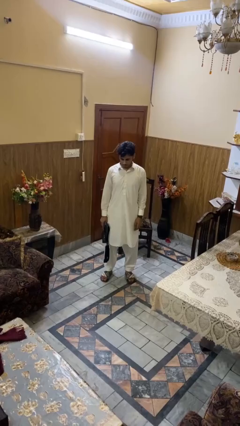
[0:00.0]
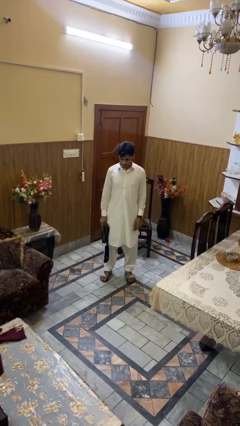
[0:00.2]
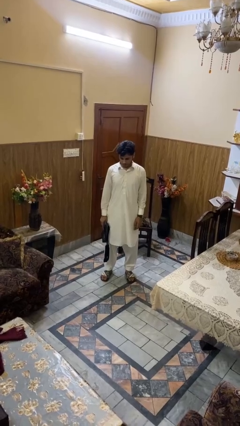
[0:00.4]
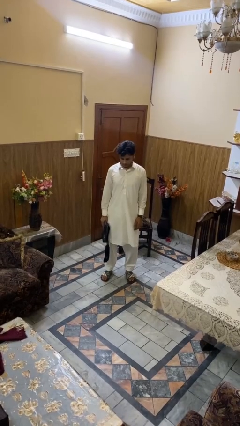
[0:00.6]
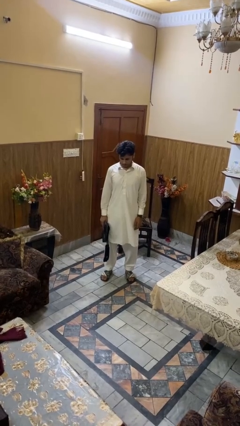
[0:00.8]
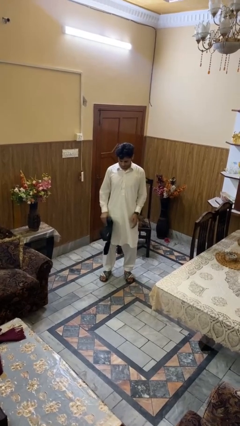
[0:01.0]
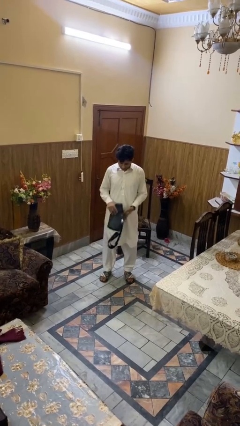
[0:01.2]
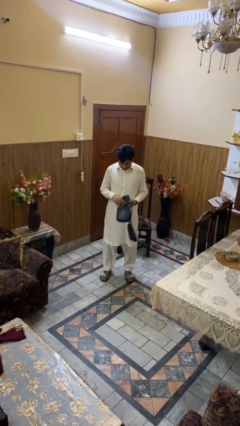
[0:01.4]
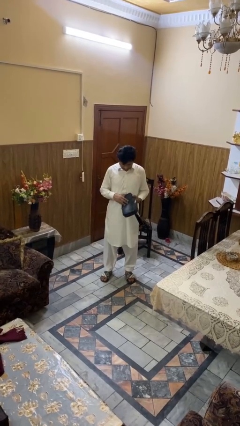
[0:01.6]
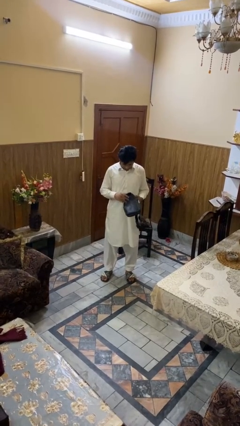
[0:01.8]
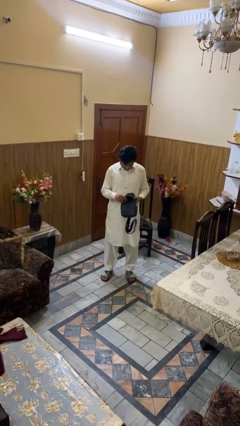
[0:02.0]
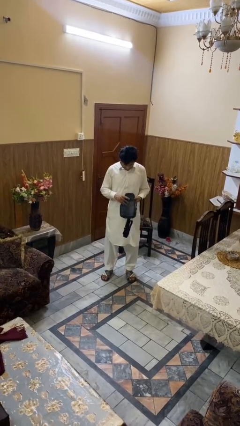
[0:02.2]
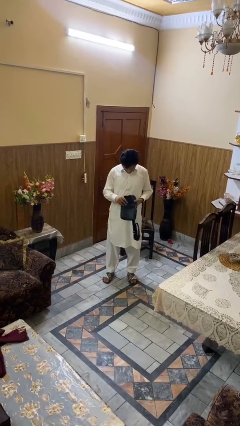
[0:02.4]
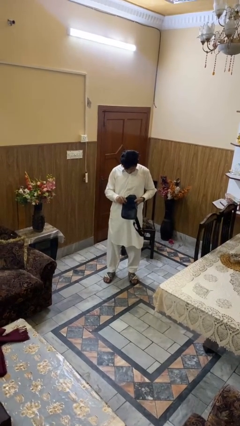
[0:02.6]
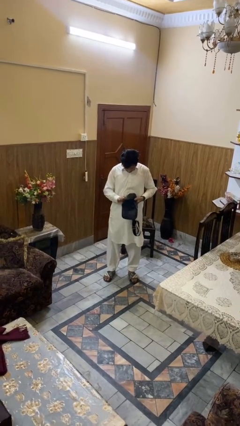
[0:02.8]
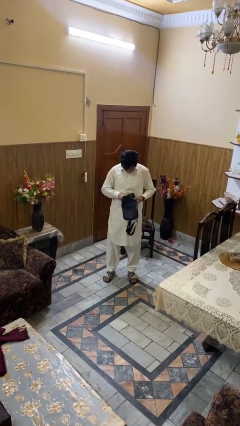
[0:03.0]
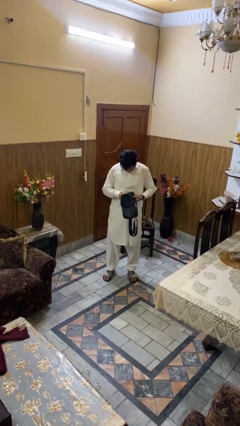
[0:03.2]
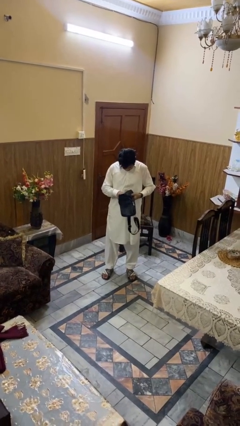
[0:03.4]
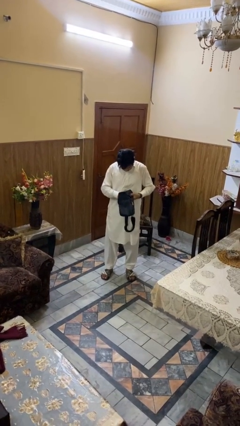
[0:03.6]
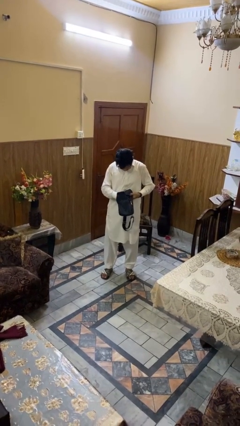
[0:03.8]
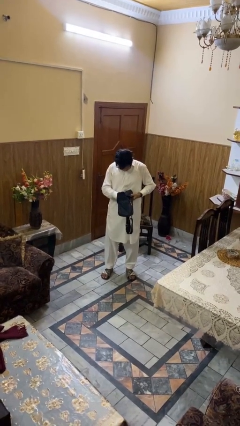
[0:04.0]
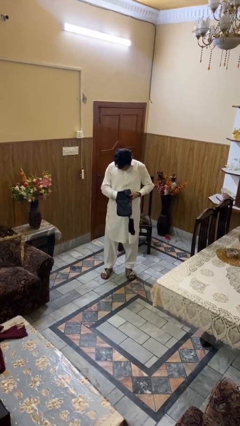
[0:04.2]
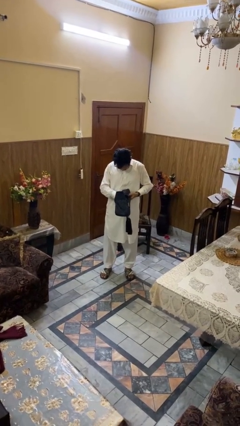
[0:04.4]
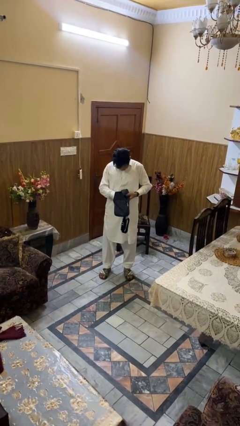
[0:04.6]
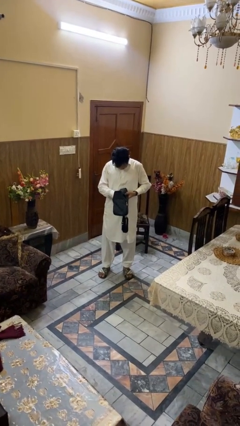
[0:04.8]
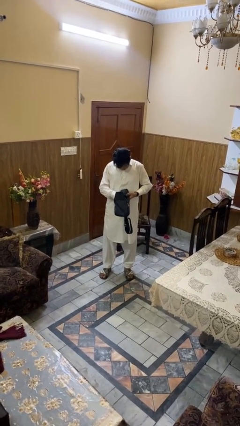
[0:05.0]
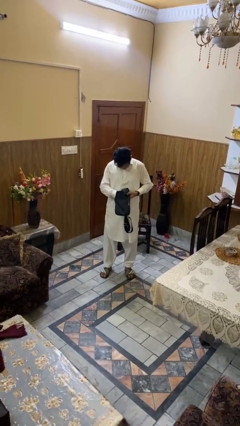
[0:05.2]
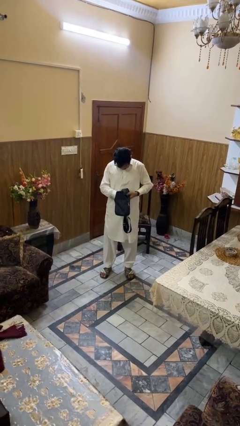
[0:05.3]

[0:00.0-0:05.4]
person searches in purse

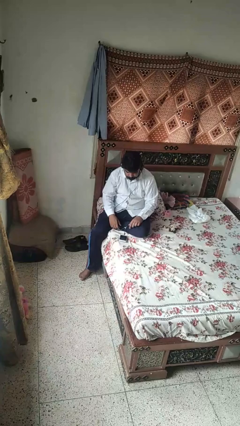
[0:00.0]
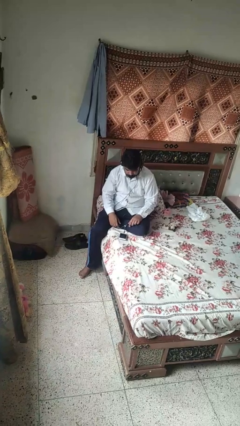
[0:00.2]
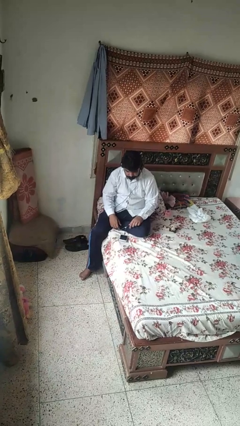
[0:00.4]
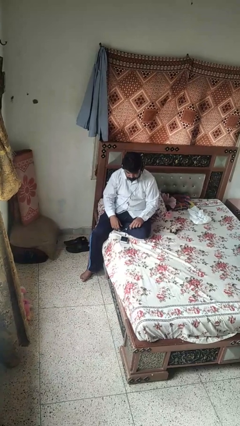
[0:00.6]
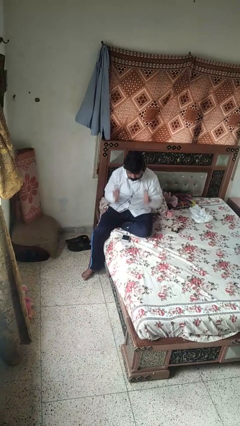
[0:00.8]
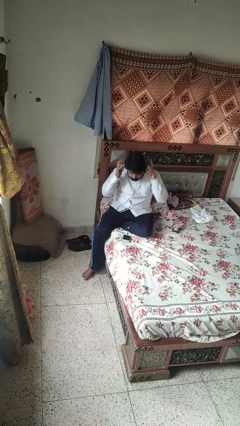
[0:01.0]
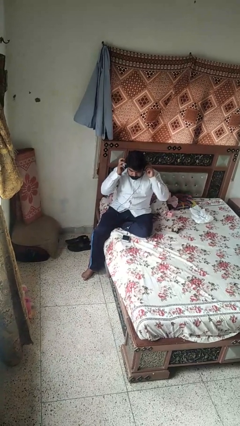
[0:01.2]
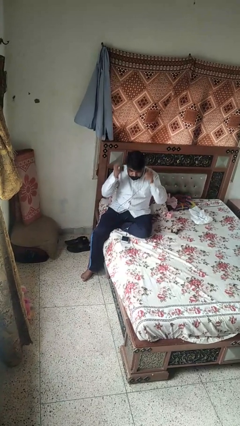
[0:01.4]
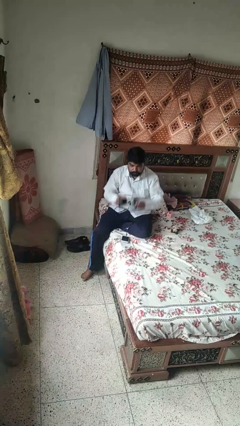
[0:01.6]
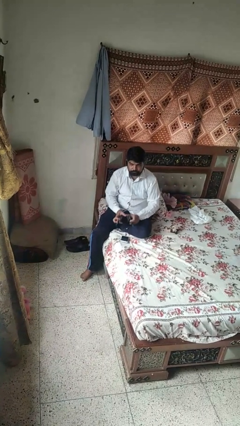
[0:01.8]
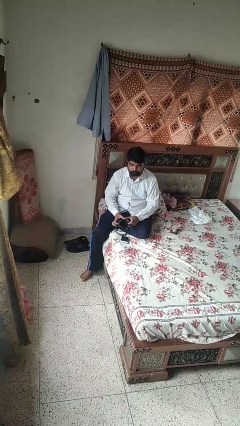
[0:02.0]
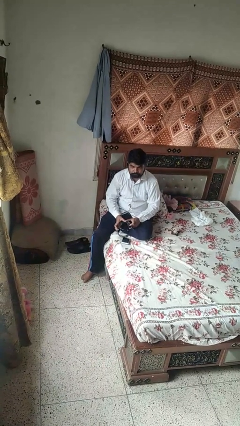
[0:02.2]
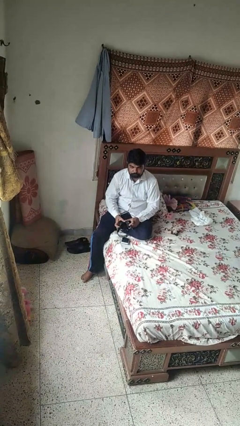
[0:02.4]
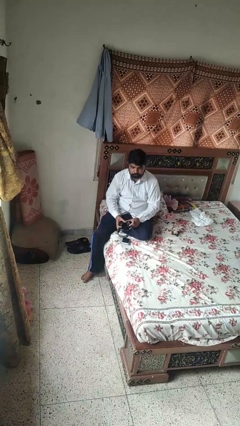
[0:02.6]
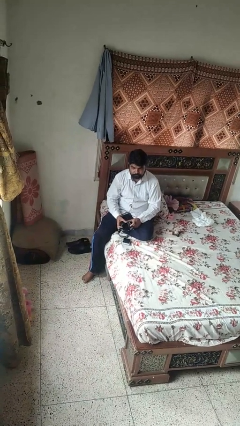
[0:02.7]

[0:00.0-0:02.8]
person takes off headphones

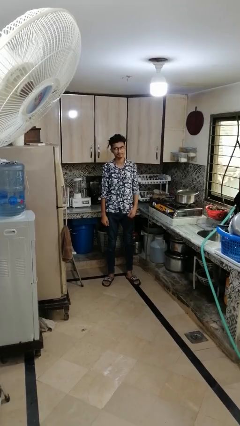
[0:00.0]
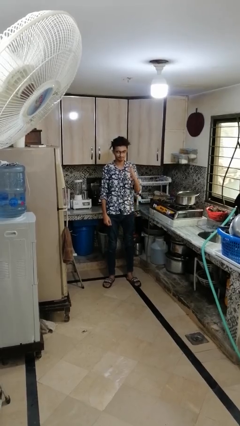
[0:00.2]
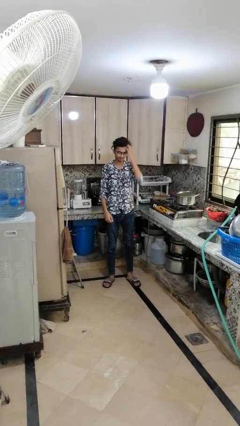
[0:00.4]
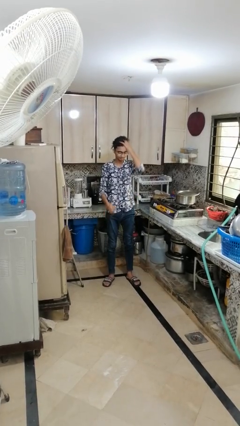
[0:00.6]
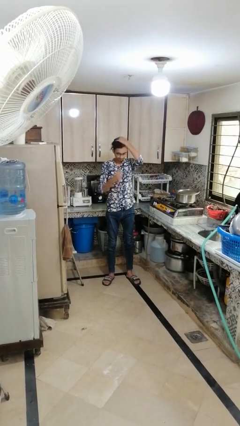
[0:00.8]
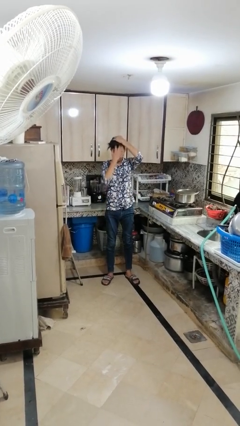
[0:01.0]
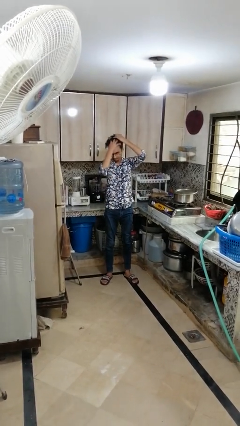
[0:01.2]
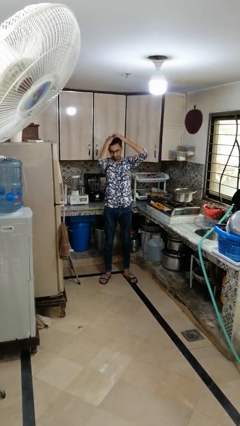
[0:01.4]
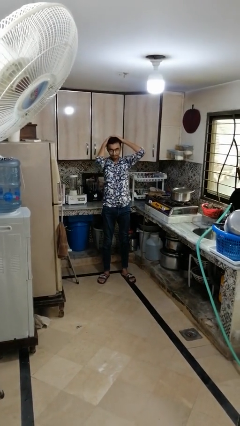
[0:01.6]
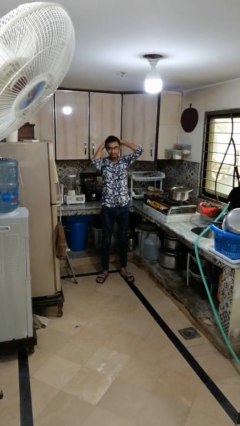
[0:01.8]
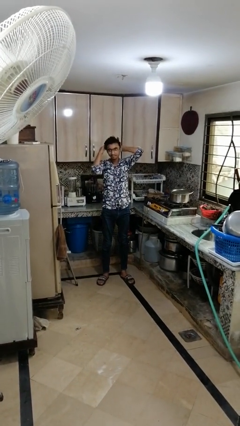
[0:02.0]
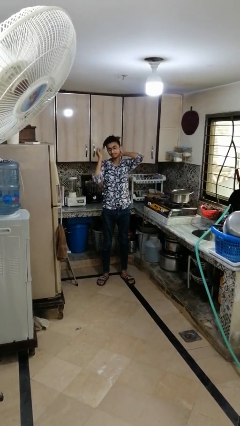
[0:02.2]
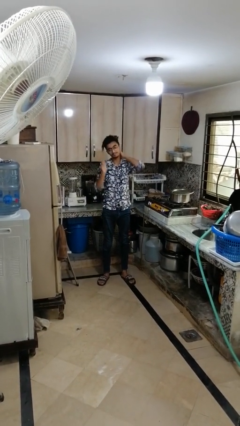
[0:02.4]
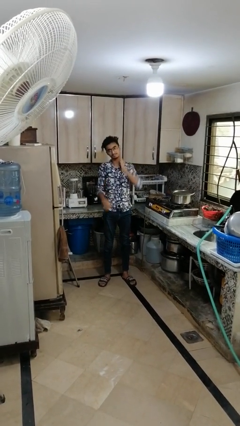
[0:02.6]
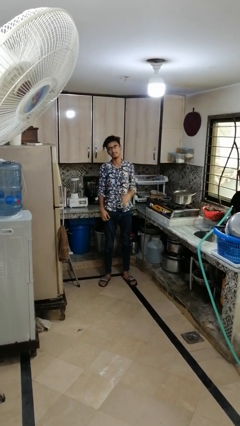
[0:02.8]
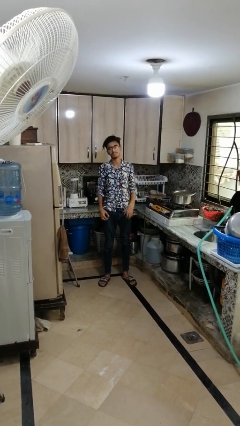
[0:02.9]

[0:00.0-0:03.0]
person strokes hair

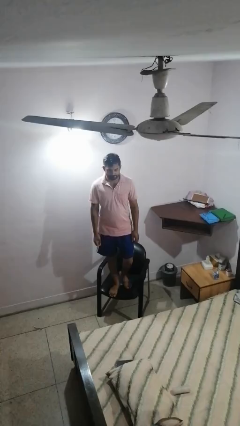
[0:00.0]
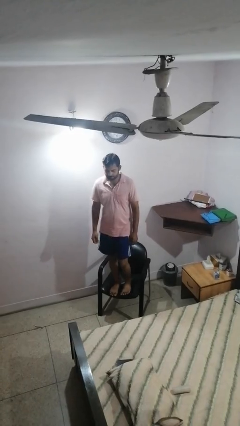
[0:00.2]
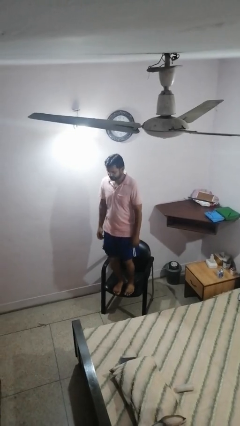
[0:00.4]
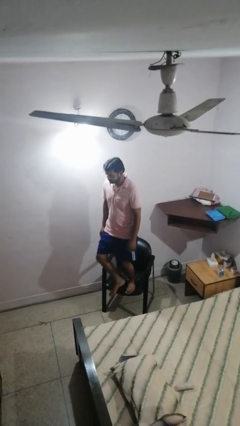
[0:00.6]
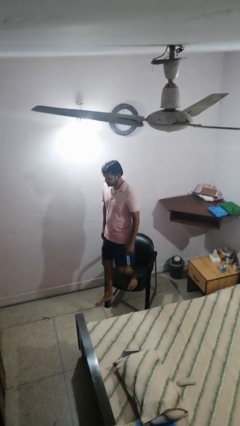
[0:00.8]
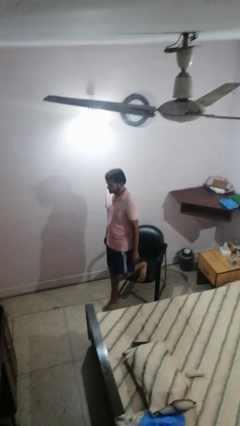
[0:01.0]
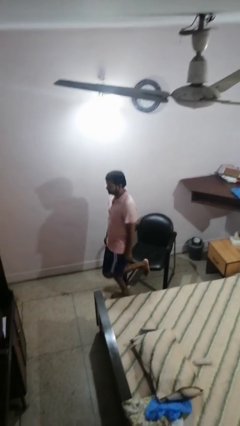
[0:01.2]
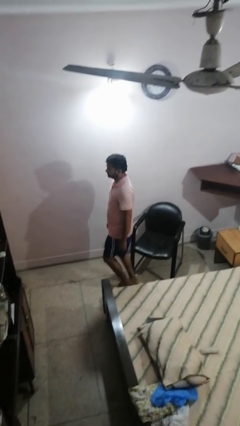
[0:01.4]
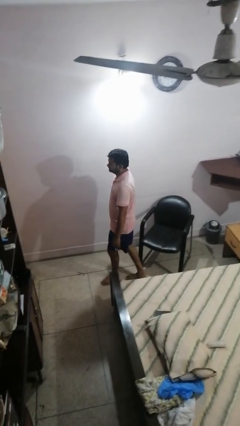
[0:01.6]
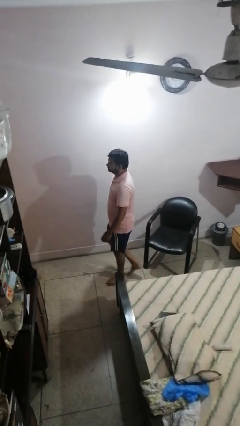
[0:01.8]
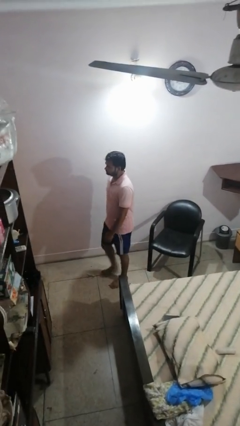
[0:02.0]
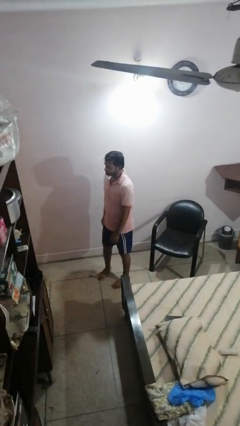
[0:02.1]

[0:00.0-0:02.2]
person climbs off chair

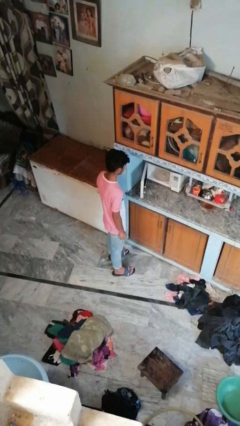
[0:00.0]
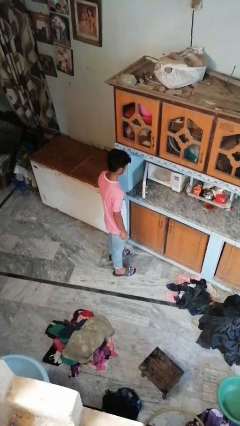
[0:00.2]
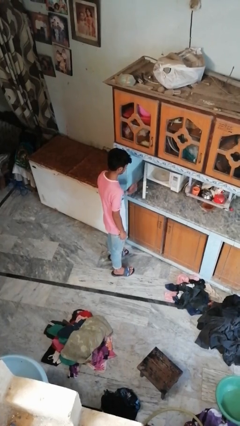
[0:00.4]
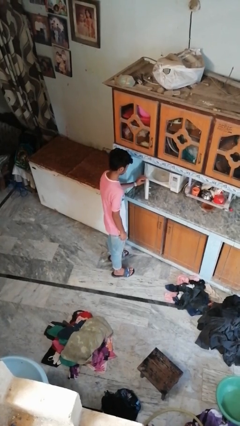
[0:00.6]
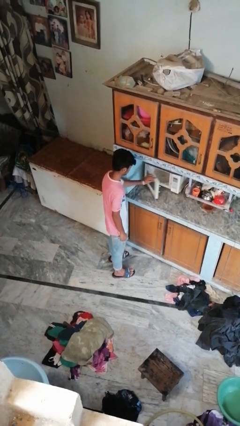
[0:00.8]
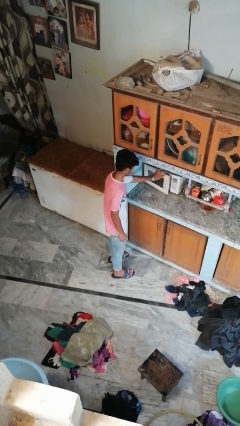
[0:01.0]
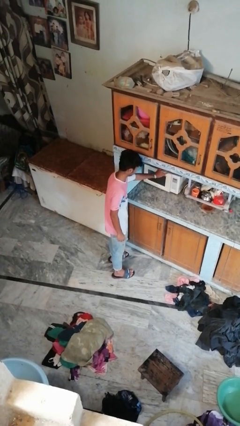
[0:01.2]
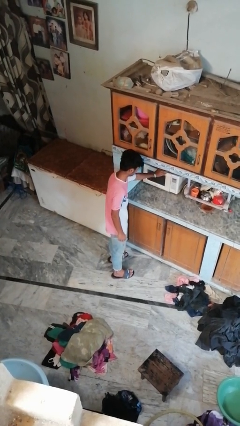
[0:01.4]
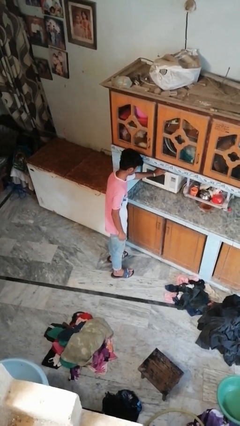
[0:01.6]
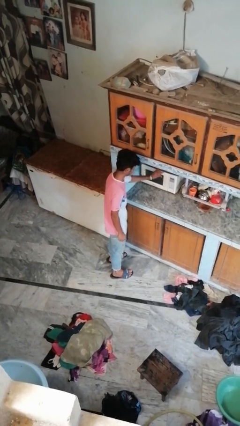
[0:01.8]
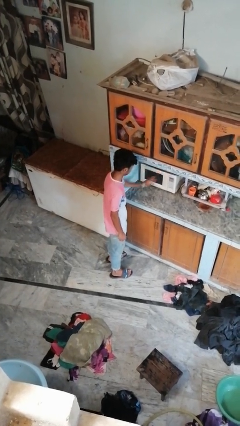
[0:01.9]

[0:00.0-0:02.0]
person closes oven door

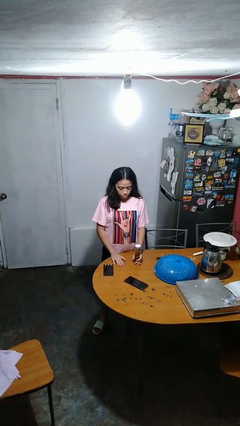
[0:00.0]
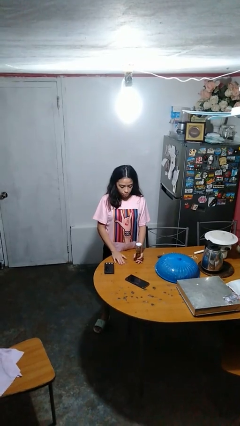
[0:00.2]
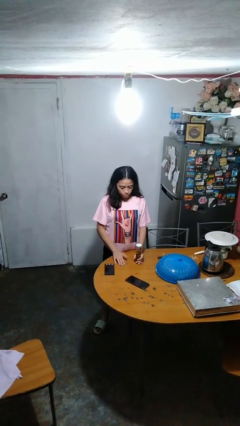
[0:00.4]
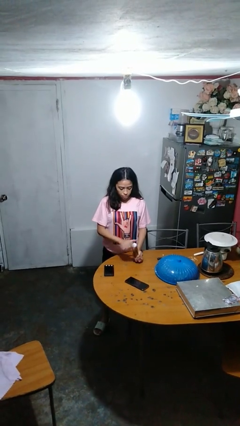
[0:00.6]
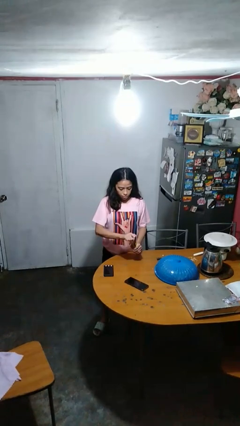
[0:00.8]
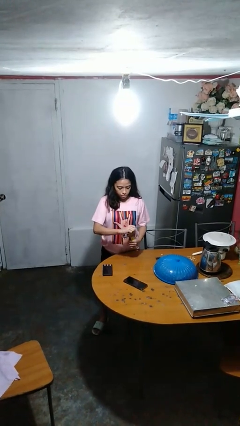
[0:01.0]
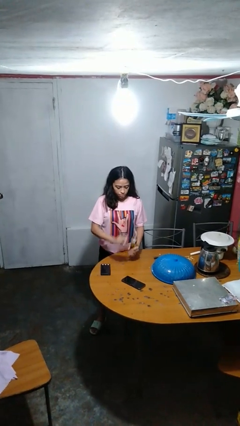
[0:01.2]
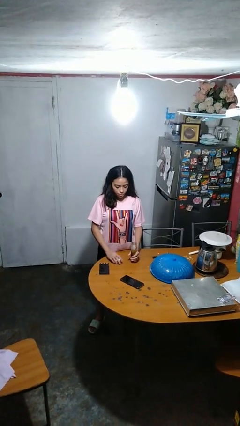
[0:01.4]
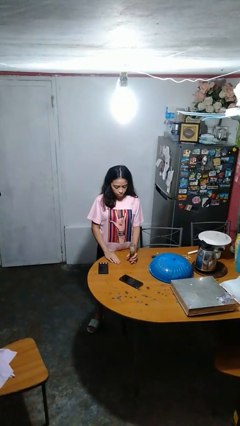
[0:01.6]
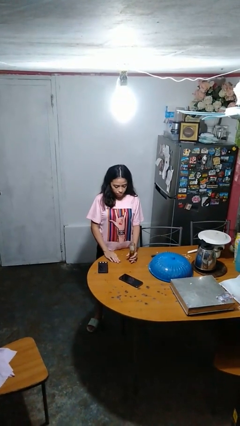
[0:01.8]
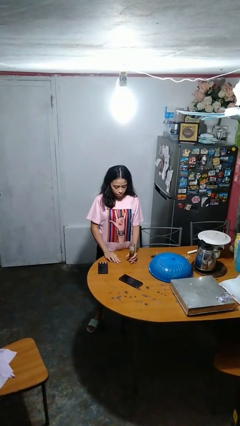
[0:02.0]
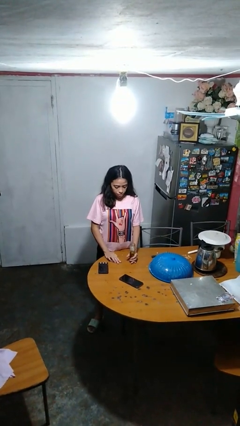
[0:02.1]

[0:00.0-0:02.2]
person opens jar
